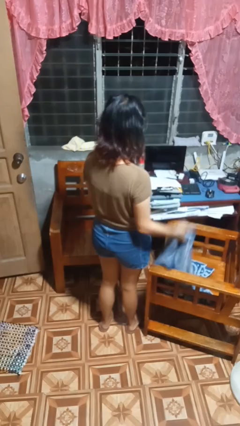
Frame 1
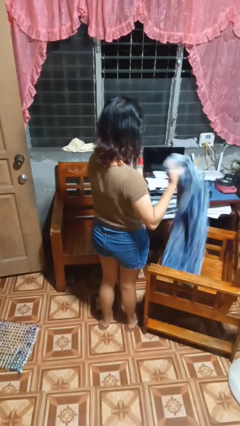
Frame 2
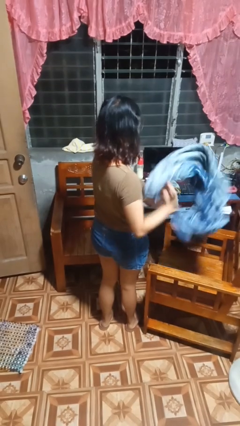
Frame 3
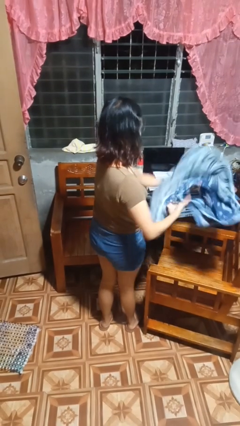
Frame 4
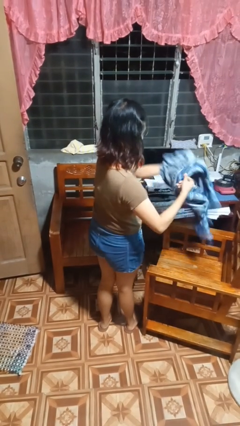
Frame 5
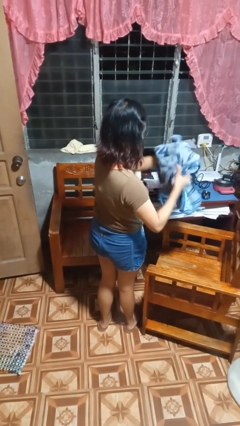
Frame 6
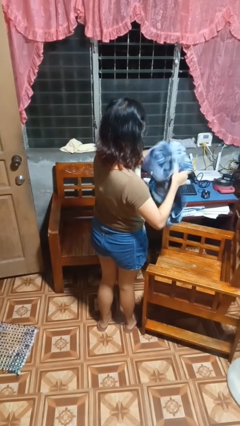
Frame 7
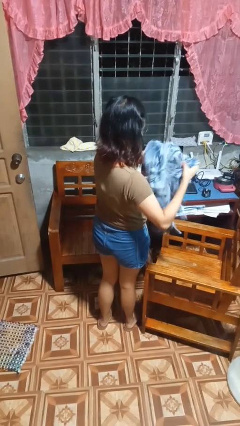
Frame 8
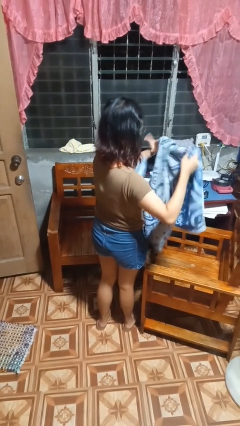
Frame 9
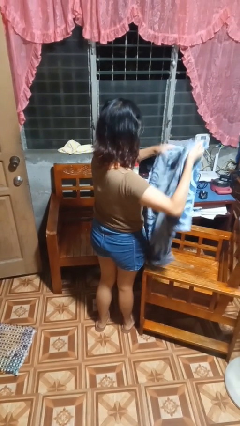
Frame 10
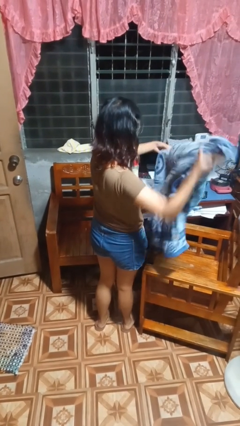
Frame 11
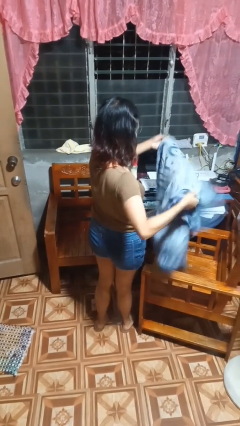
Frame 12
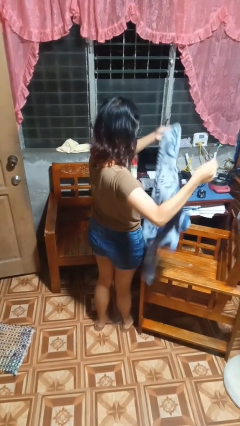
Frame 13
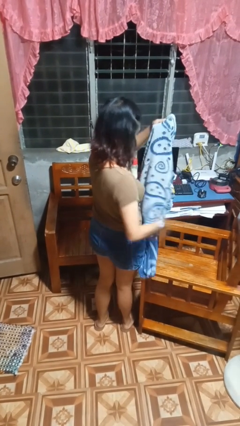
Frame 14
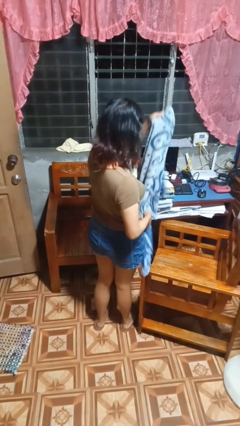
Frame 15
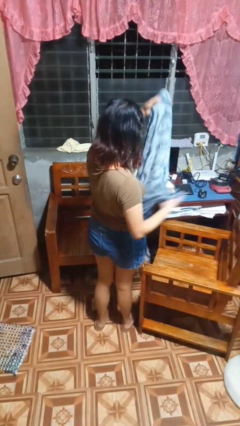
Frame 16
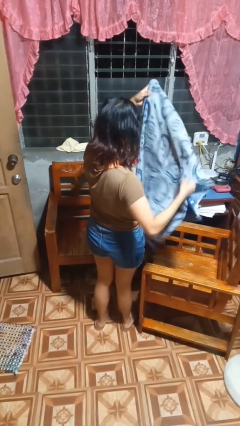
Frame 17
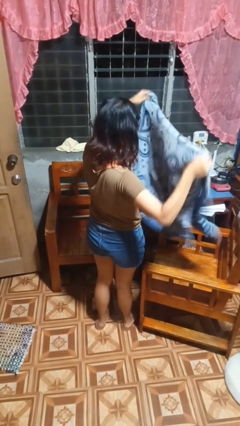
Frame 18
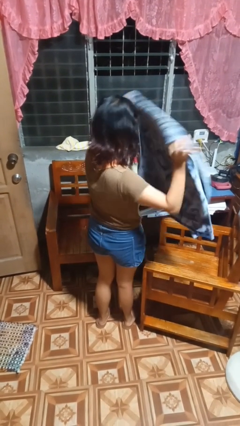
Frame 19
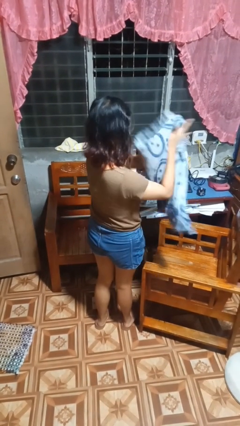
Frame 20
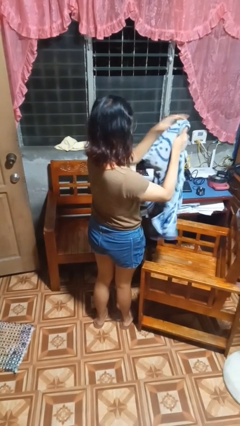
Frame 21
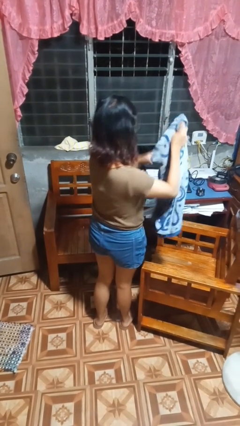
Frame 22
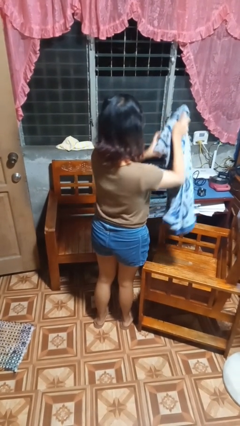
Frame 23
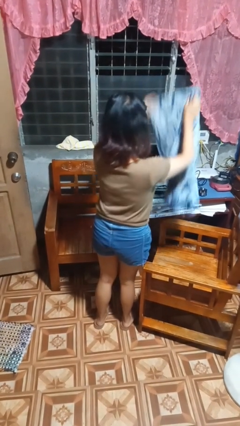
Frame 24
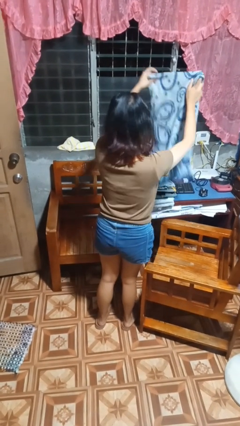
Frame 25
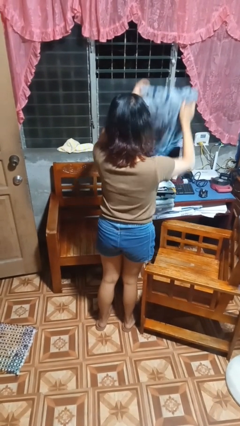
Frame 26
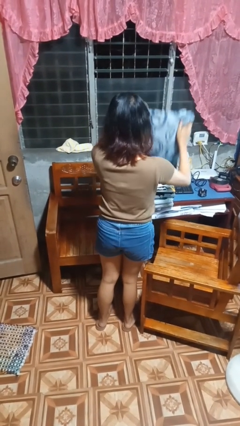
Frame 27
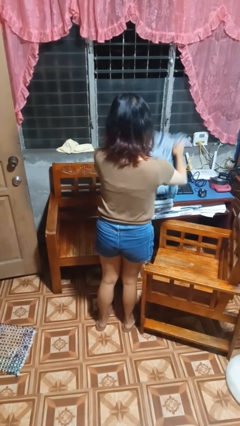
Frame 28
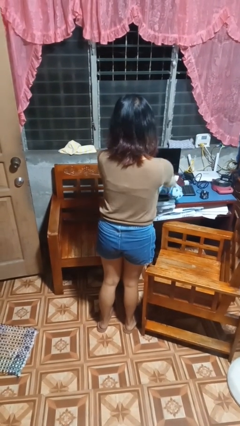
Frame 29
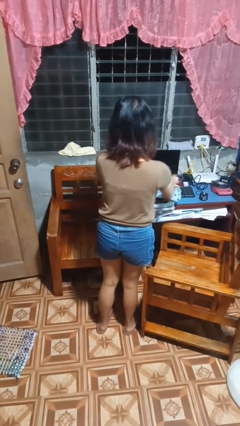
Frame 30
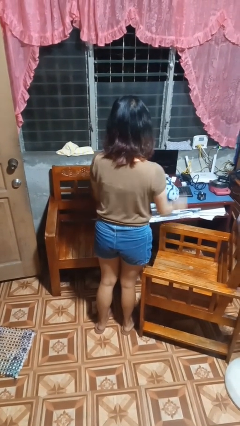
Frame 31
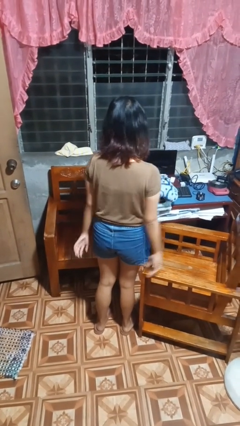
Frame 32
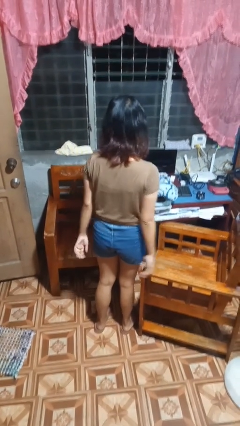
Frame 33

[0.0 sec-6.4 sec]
person folds towel

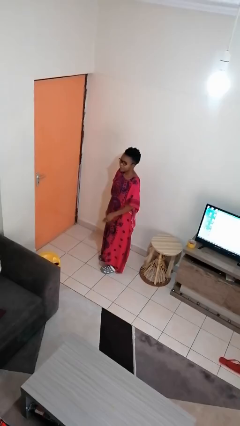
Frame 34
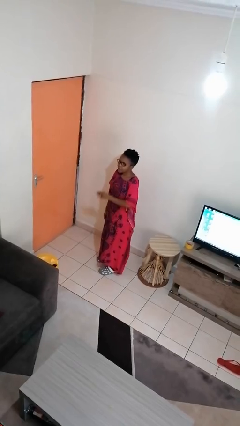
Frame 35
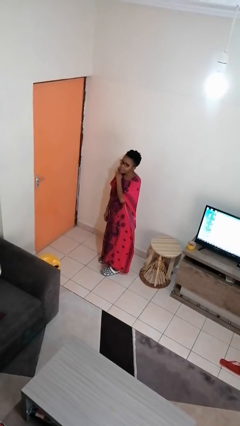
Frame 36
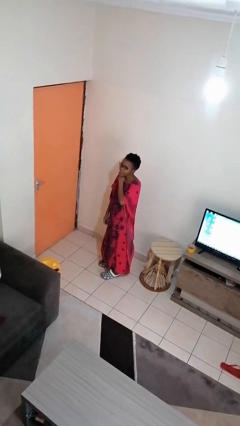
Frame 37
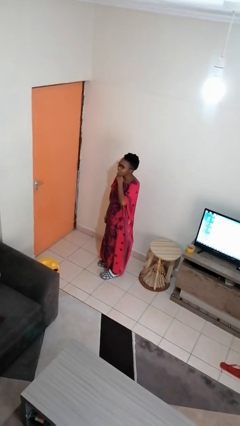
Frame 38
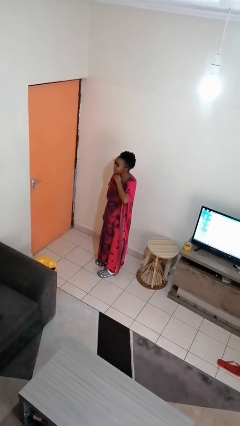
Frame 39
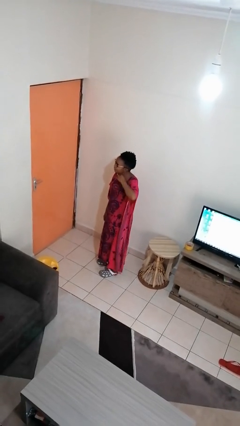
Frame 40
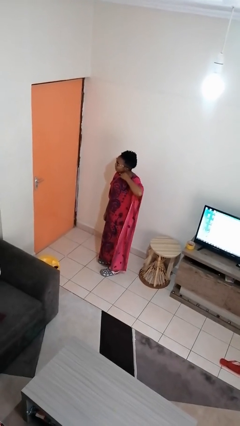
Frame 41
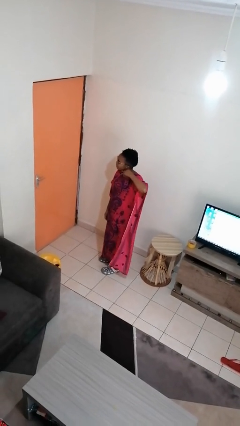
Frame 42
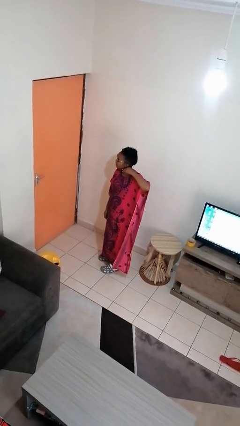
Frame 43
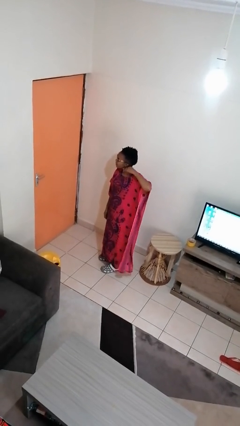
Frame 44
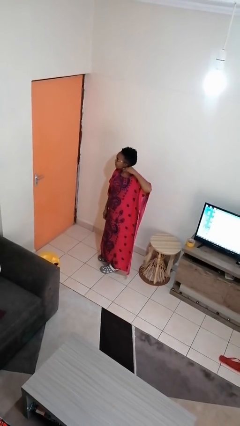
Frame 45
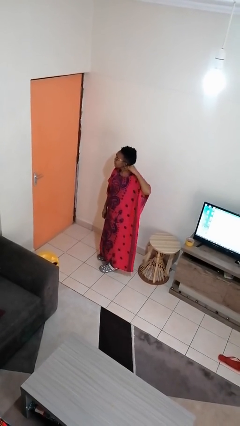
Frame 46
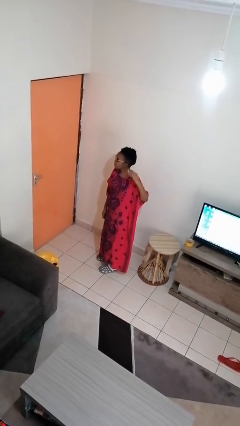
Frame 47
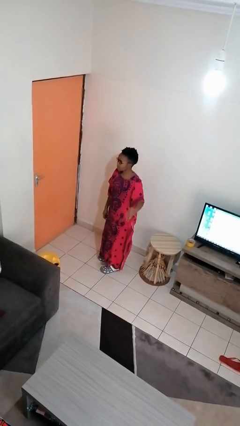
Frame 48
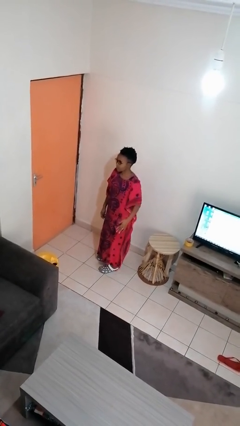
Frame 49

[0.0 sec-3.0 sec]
person gestures cut

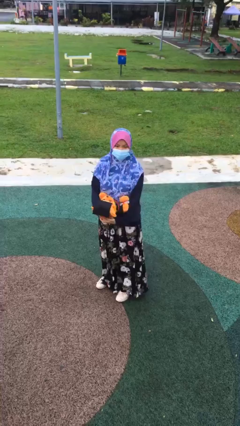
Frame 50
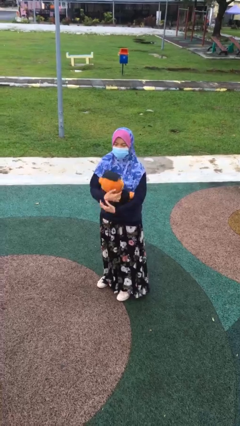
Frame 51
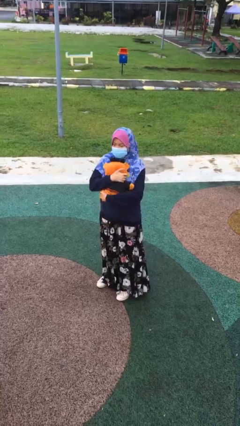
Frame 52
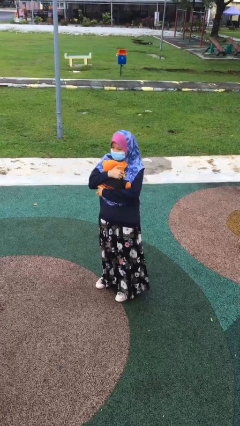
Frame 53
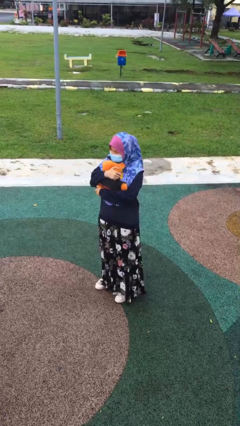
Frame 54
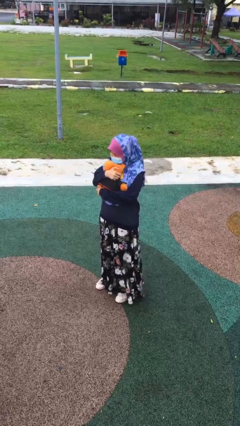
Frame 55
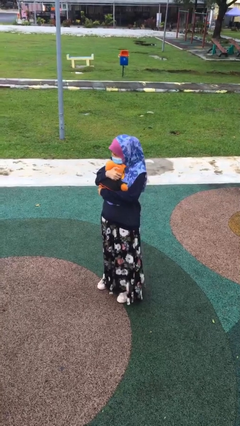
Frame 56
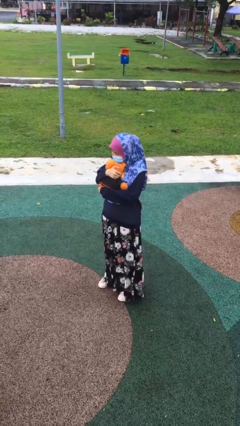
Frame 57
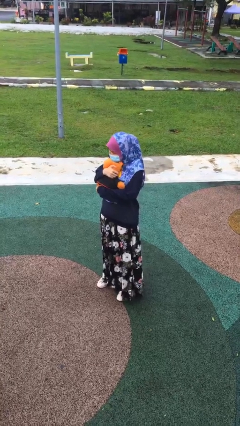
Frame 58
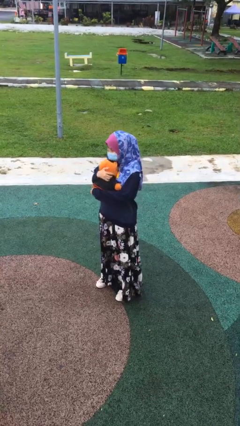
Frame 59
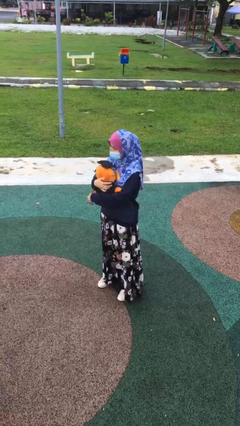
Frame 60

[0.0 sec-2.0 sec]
person hugs stuffed animal

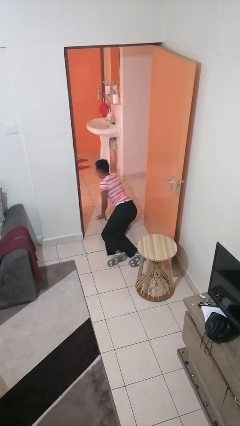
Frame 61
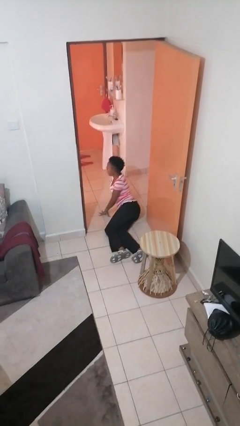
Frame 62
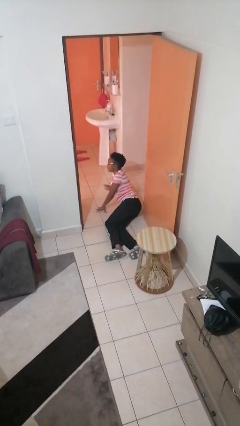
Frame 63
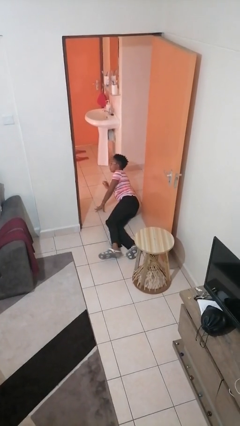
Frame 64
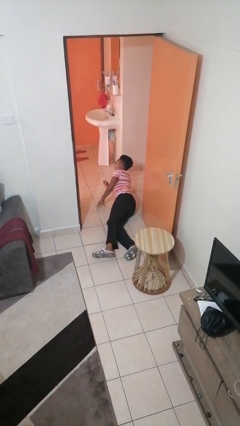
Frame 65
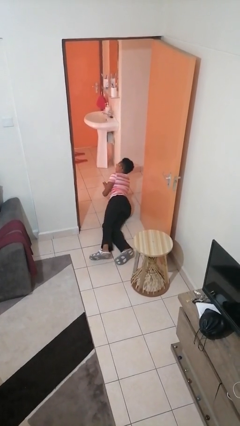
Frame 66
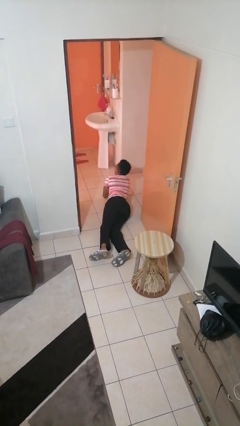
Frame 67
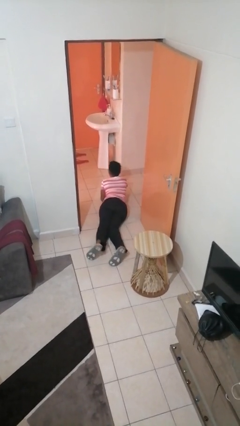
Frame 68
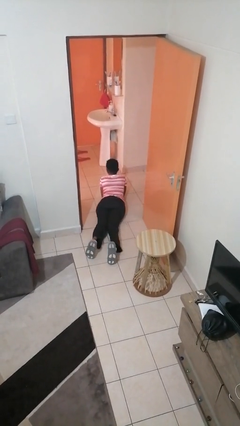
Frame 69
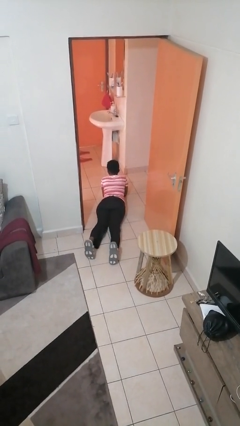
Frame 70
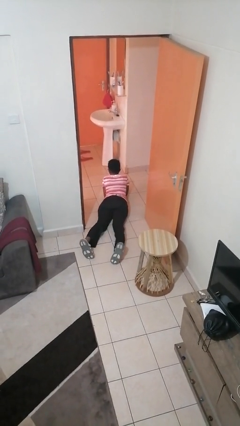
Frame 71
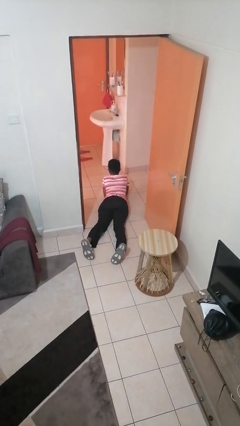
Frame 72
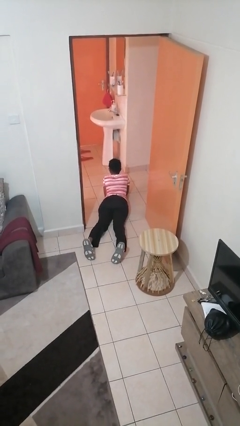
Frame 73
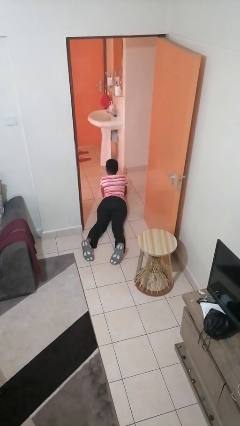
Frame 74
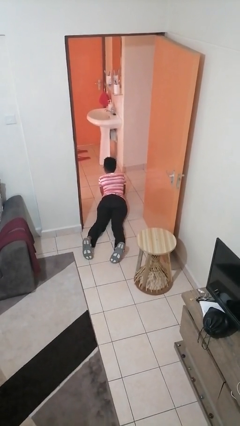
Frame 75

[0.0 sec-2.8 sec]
person lies down on floor

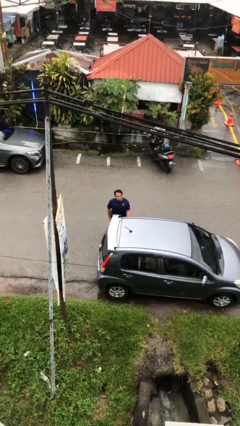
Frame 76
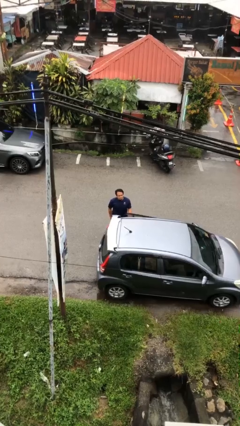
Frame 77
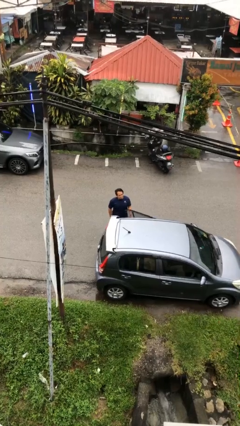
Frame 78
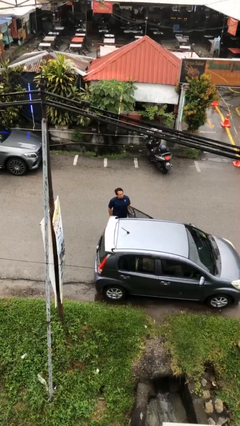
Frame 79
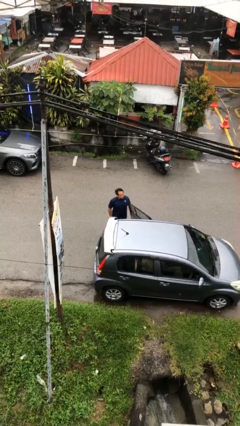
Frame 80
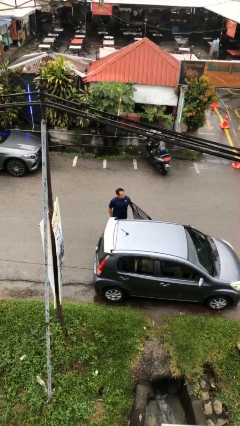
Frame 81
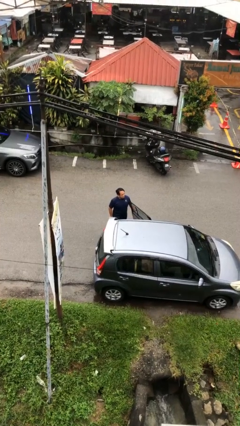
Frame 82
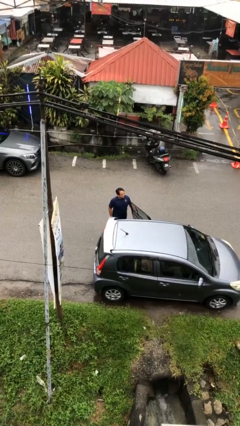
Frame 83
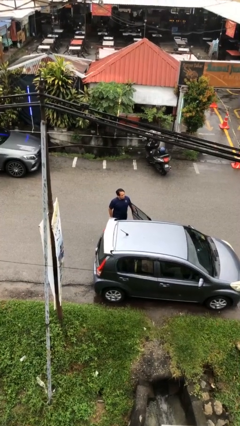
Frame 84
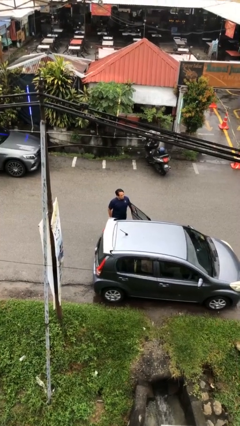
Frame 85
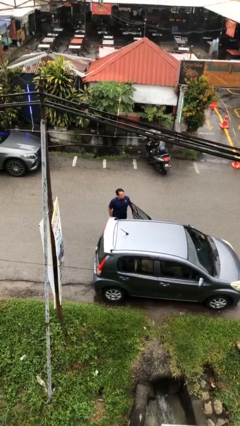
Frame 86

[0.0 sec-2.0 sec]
person opens car door

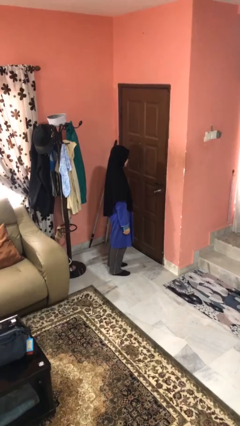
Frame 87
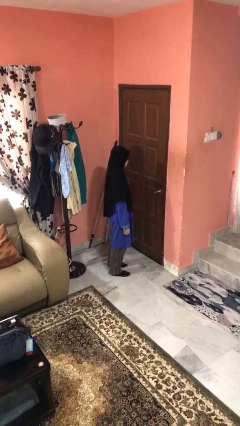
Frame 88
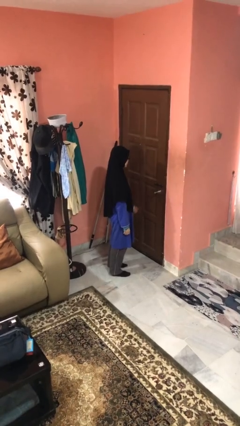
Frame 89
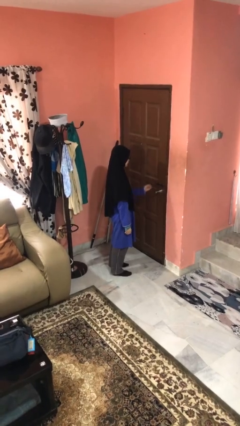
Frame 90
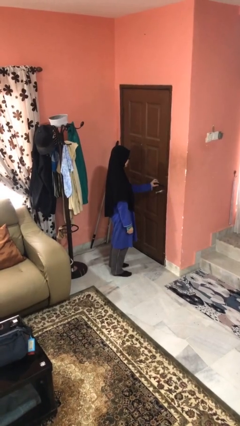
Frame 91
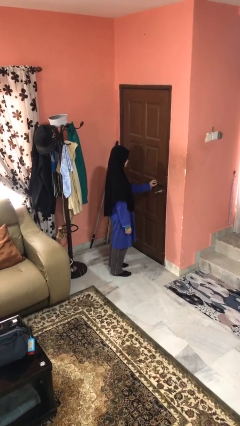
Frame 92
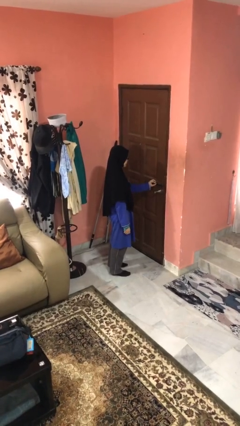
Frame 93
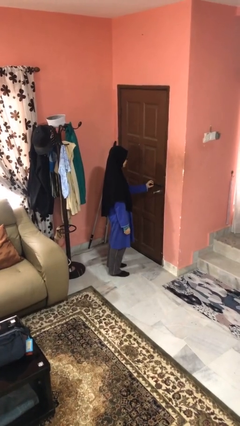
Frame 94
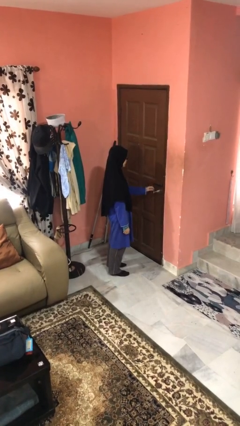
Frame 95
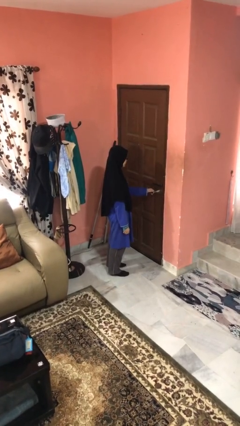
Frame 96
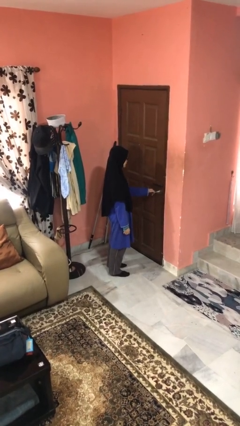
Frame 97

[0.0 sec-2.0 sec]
person unlocks door with keys
